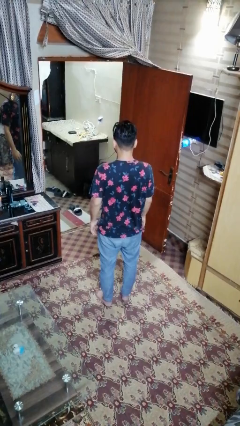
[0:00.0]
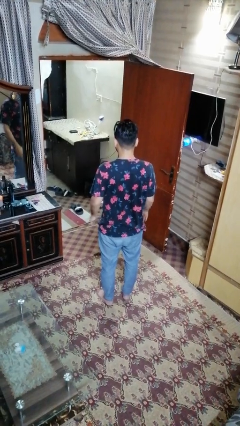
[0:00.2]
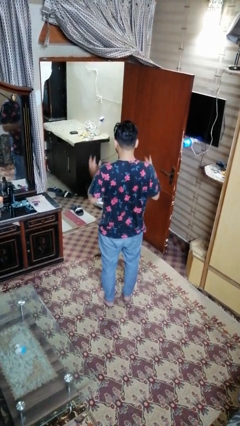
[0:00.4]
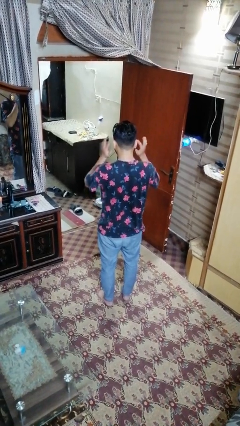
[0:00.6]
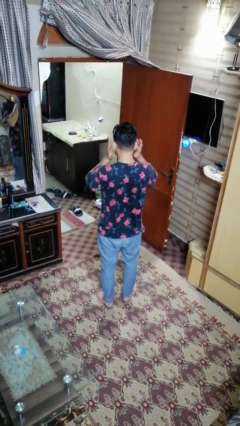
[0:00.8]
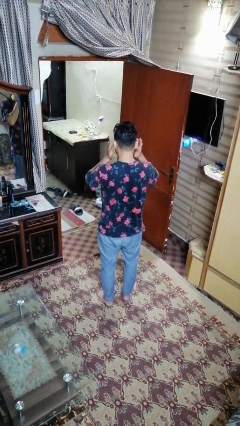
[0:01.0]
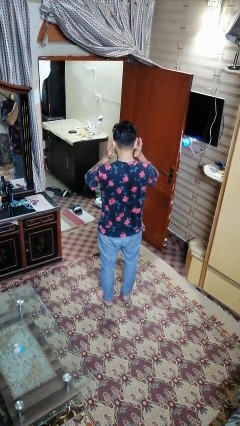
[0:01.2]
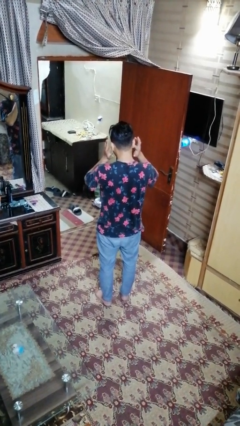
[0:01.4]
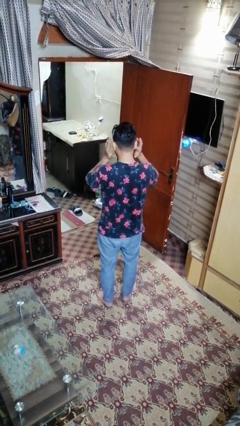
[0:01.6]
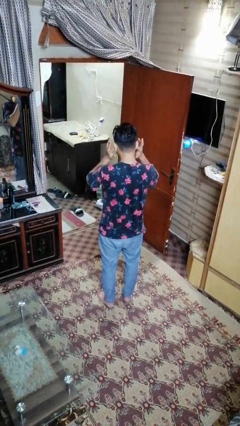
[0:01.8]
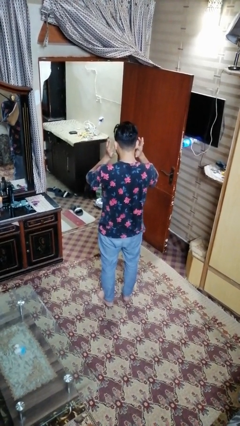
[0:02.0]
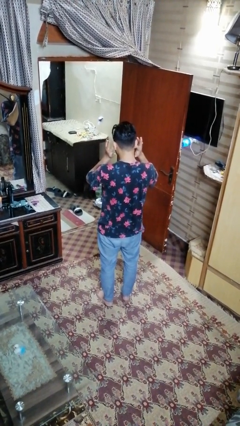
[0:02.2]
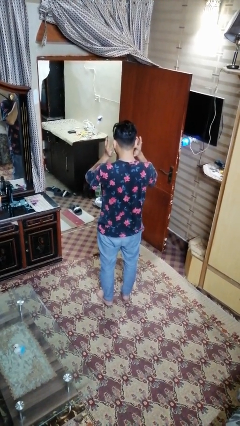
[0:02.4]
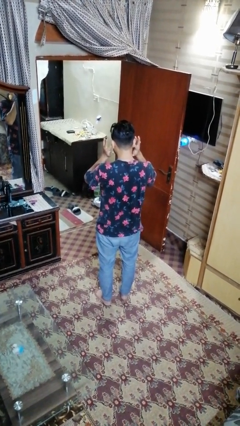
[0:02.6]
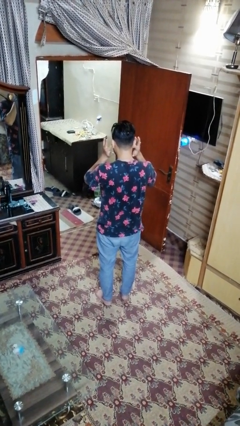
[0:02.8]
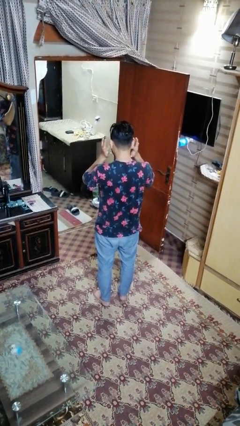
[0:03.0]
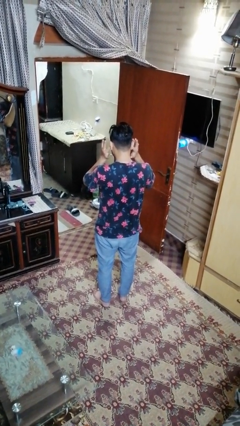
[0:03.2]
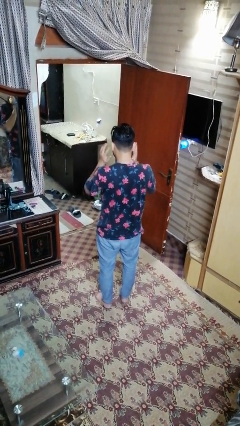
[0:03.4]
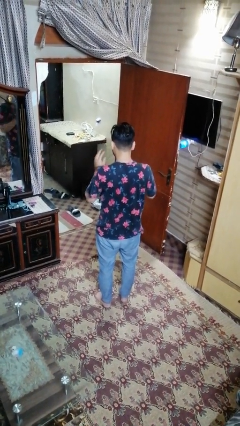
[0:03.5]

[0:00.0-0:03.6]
person puts fingers in ear

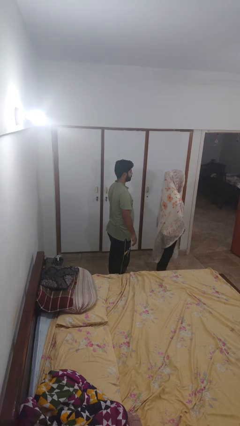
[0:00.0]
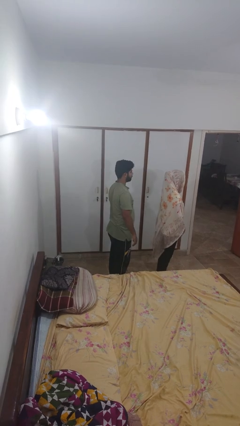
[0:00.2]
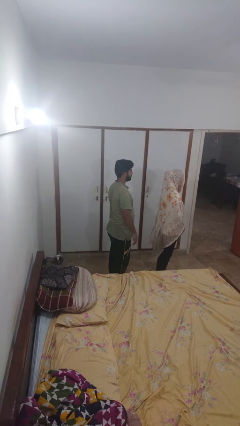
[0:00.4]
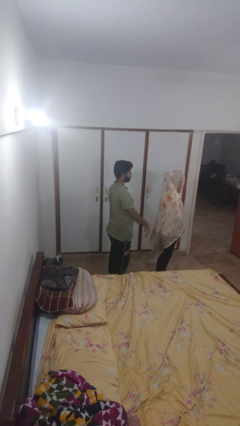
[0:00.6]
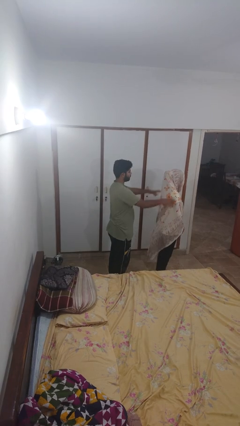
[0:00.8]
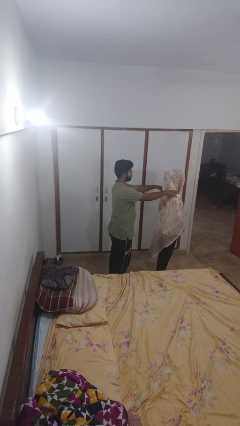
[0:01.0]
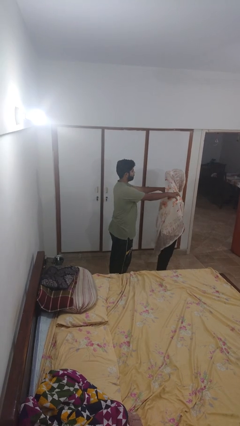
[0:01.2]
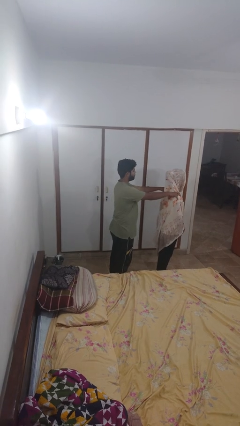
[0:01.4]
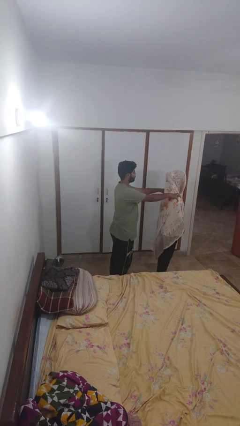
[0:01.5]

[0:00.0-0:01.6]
person grabs person by shoulder

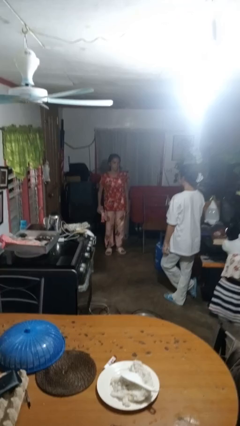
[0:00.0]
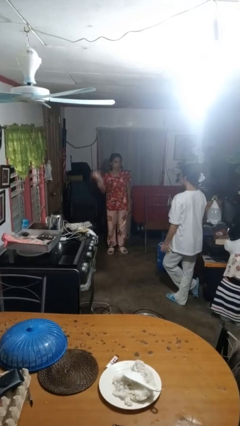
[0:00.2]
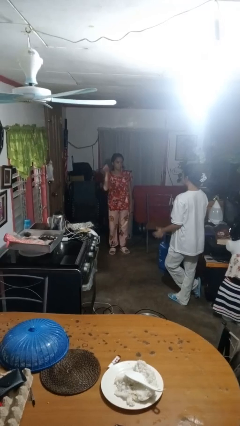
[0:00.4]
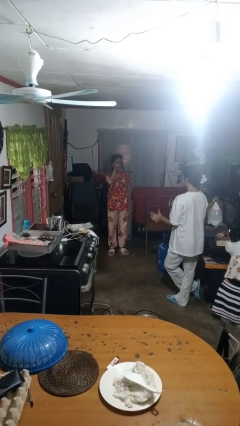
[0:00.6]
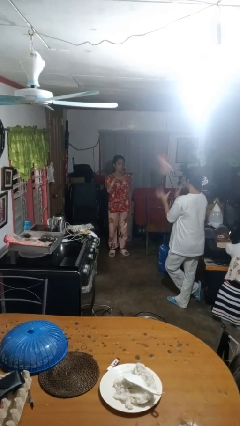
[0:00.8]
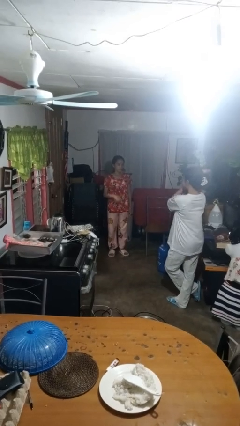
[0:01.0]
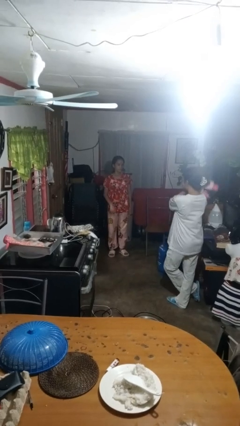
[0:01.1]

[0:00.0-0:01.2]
person throws object to person

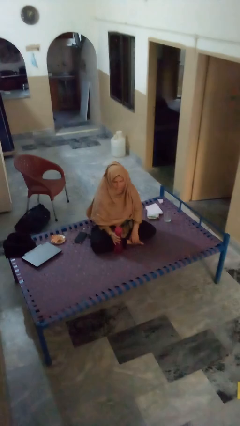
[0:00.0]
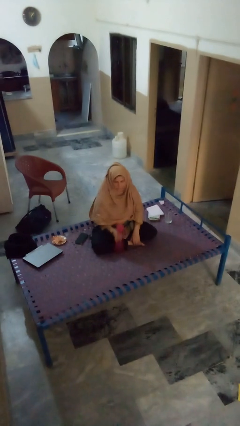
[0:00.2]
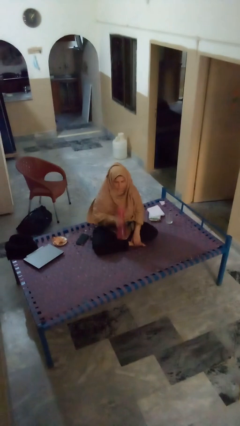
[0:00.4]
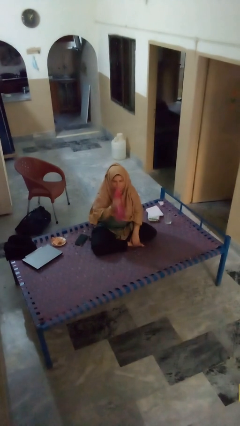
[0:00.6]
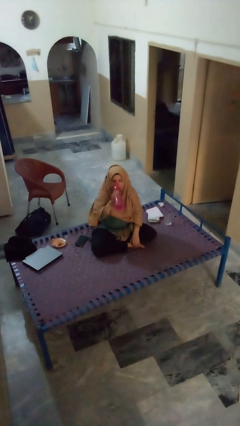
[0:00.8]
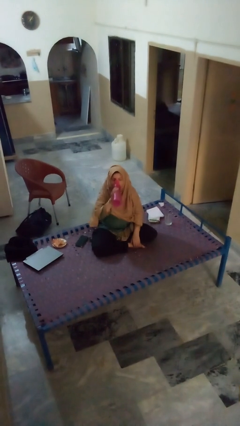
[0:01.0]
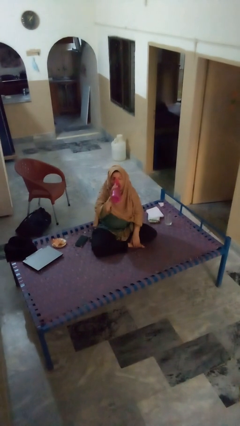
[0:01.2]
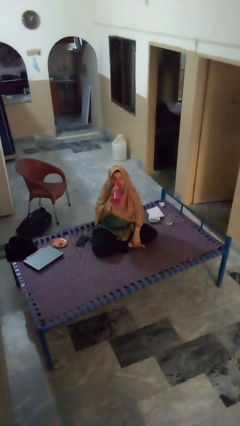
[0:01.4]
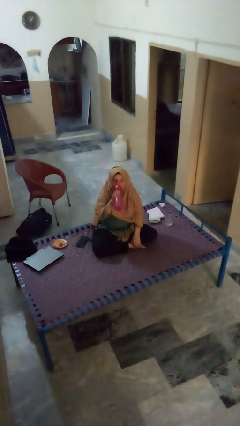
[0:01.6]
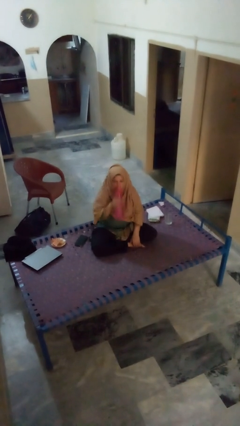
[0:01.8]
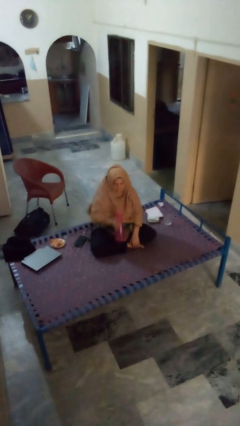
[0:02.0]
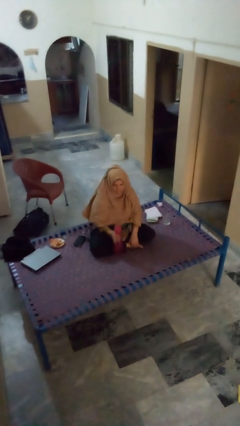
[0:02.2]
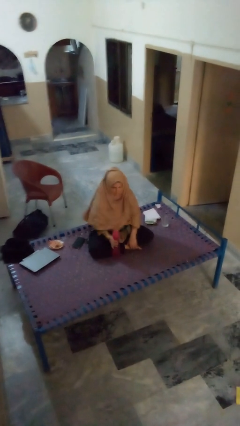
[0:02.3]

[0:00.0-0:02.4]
person drinks from bottle

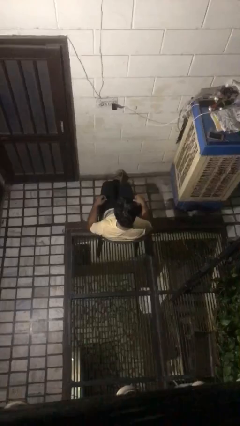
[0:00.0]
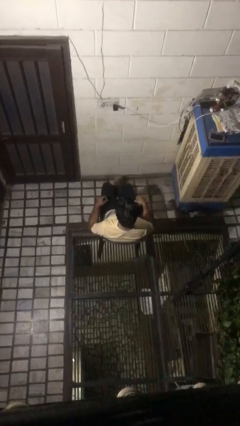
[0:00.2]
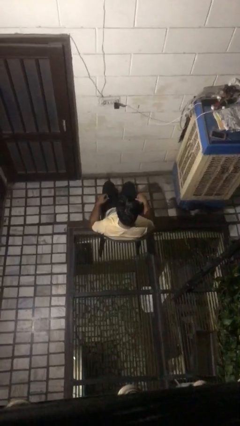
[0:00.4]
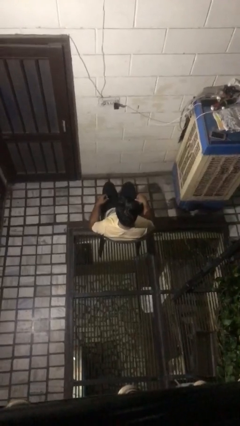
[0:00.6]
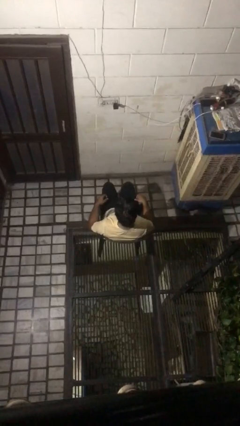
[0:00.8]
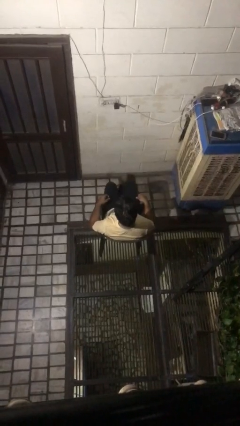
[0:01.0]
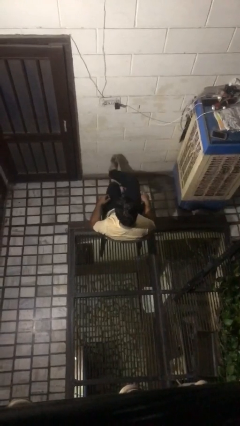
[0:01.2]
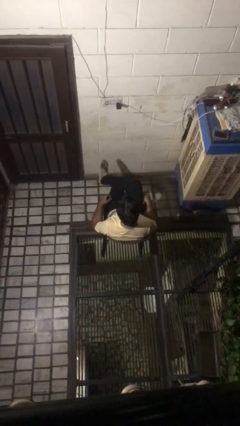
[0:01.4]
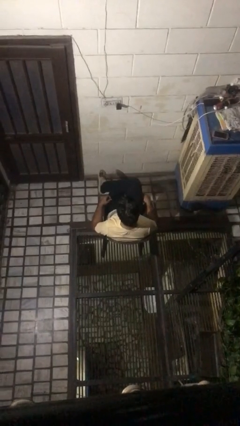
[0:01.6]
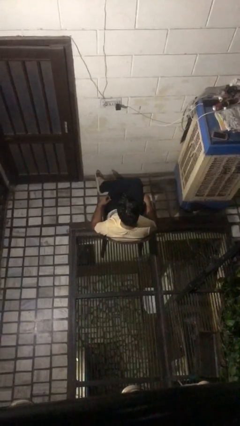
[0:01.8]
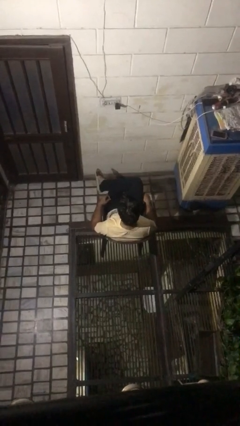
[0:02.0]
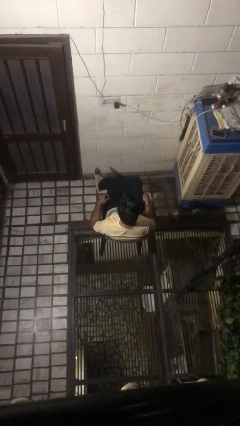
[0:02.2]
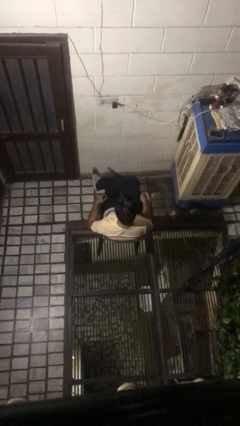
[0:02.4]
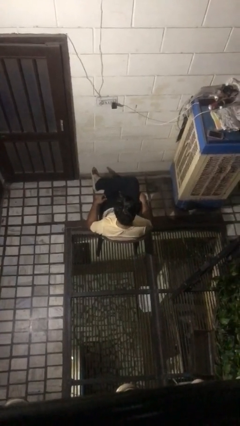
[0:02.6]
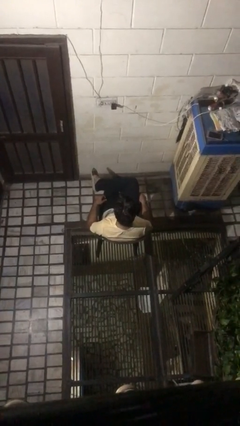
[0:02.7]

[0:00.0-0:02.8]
person crosses legs

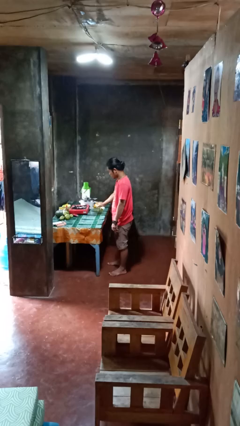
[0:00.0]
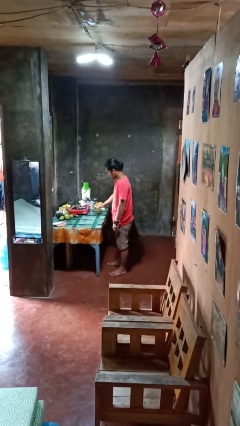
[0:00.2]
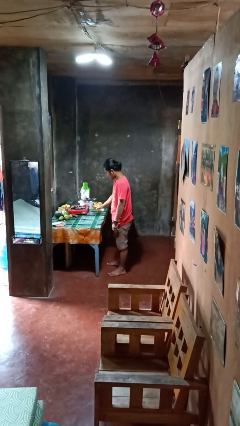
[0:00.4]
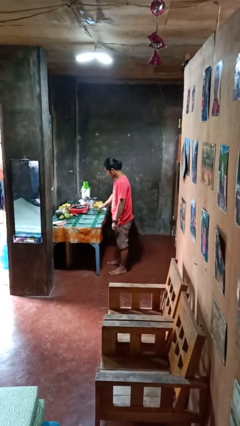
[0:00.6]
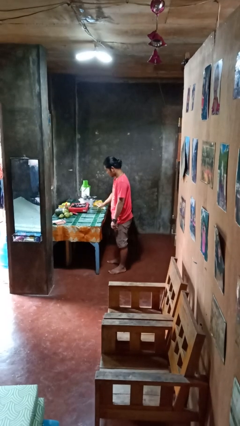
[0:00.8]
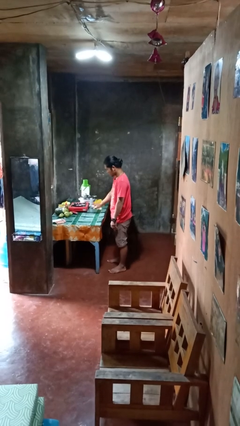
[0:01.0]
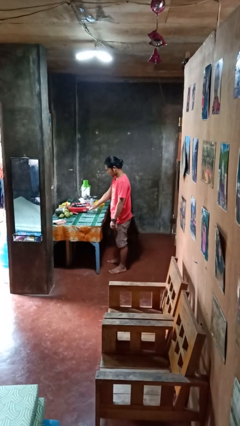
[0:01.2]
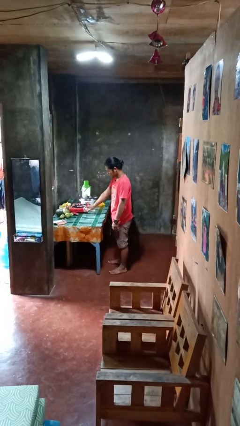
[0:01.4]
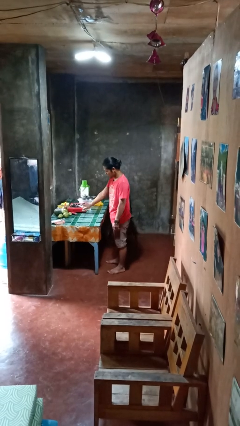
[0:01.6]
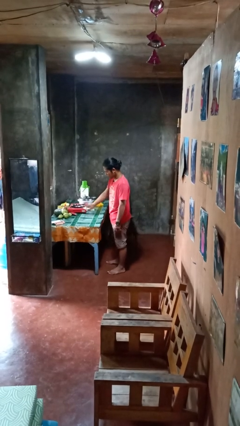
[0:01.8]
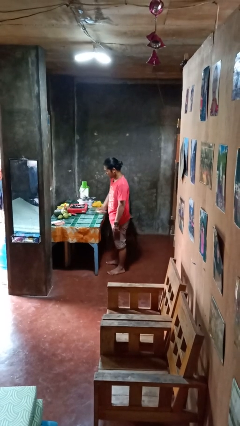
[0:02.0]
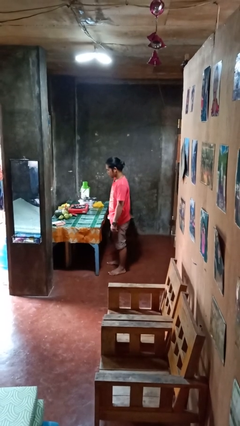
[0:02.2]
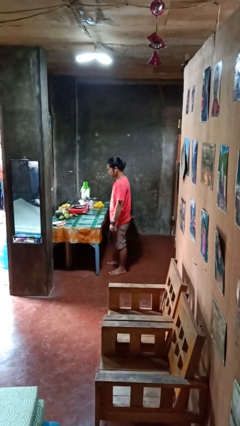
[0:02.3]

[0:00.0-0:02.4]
person sprays from bottle

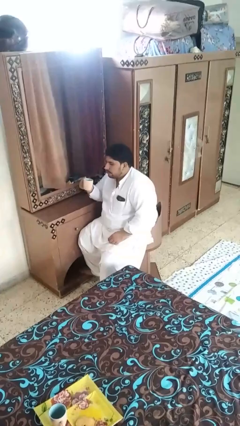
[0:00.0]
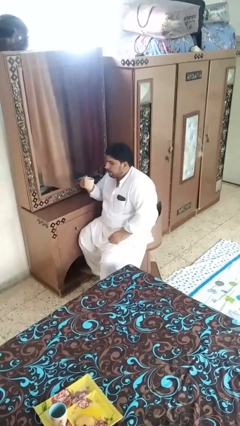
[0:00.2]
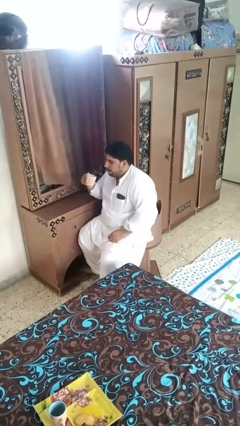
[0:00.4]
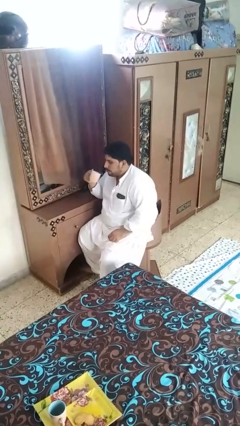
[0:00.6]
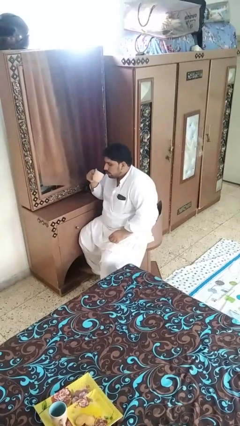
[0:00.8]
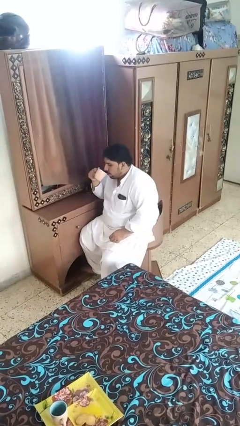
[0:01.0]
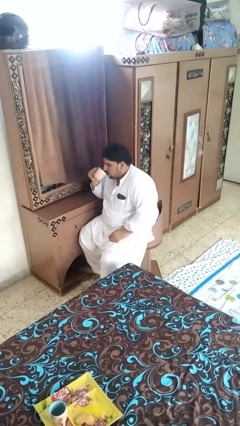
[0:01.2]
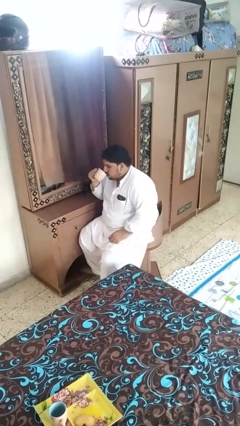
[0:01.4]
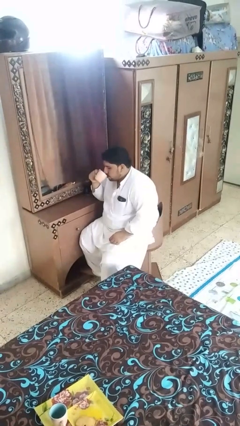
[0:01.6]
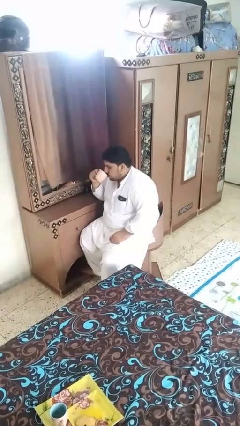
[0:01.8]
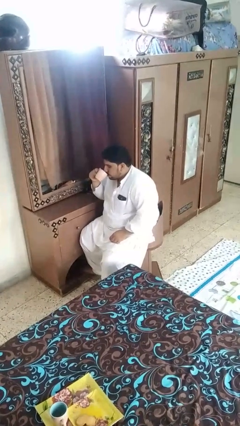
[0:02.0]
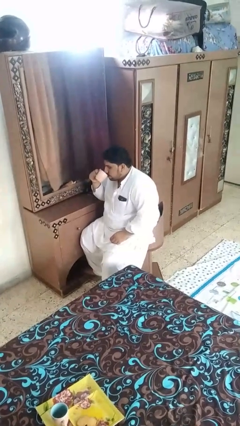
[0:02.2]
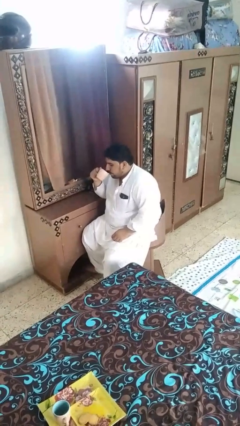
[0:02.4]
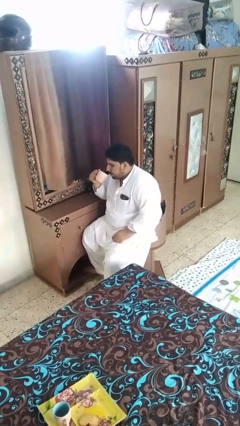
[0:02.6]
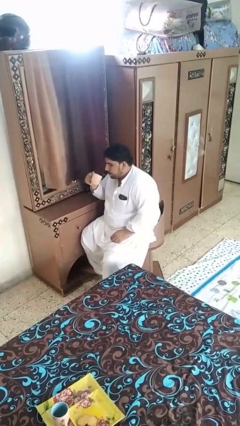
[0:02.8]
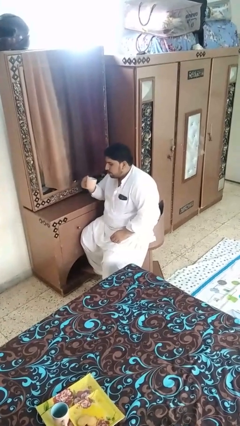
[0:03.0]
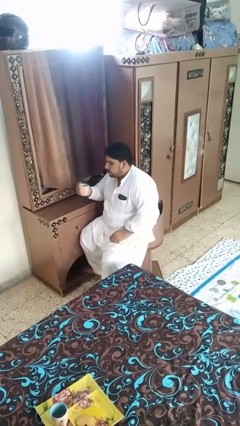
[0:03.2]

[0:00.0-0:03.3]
person drinks from mug
